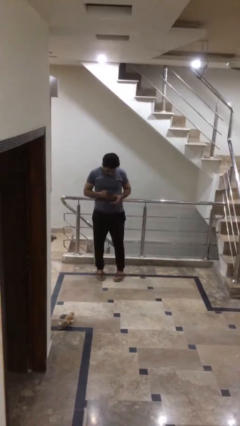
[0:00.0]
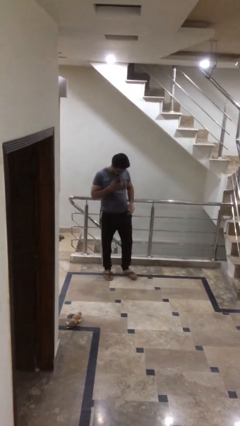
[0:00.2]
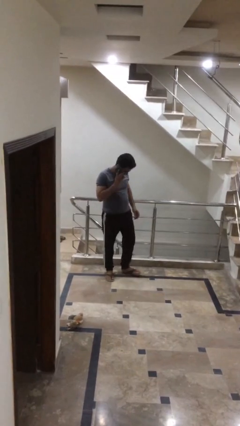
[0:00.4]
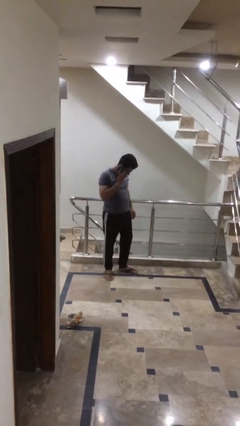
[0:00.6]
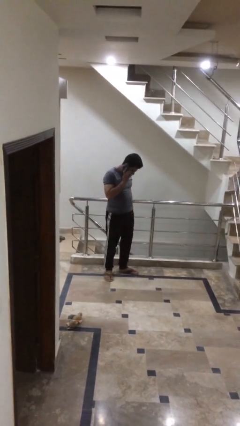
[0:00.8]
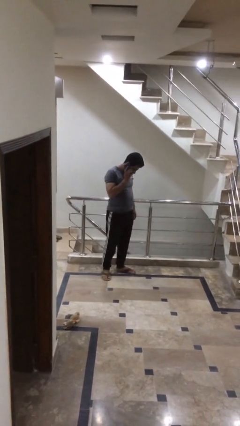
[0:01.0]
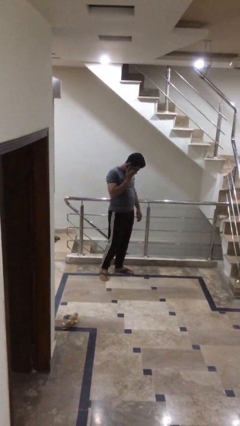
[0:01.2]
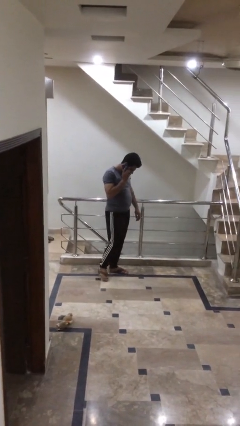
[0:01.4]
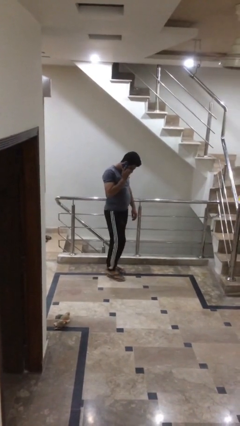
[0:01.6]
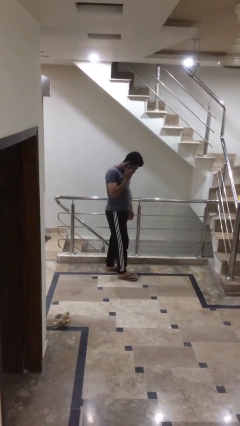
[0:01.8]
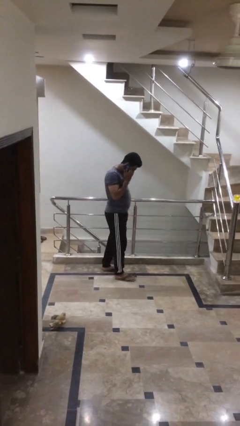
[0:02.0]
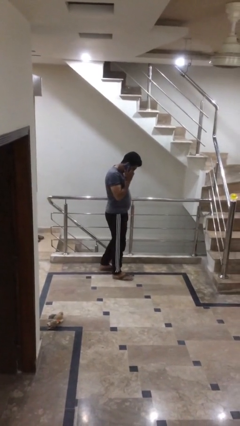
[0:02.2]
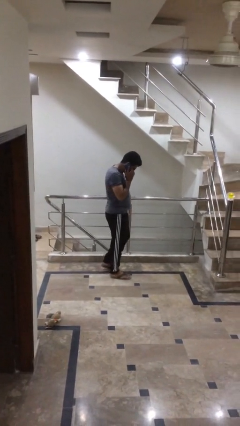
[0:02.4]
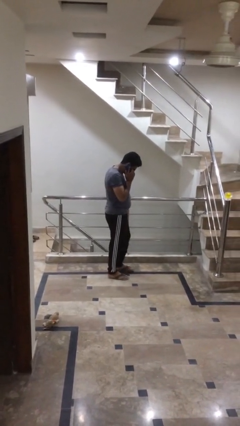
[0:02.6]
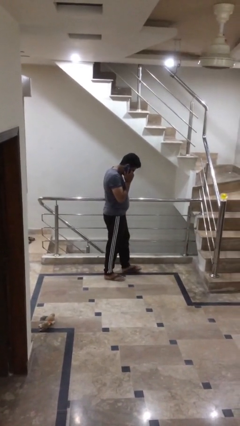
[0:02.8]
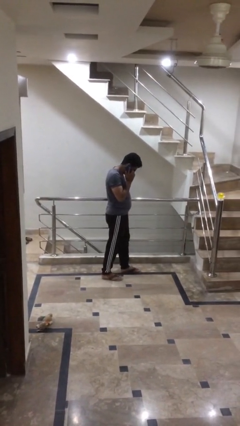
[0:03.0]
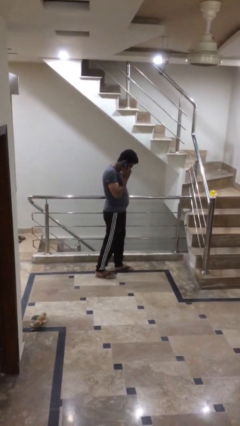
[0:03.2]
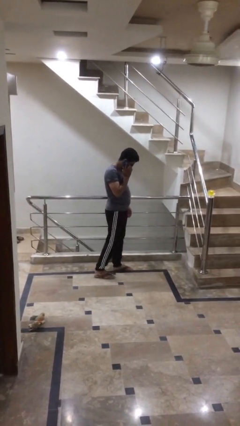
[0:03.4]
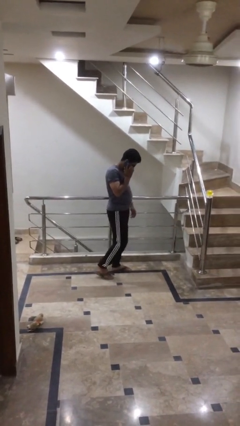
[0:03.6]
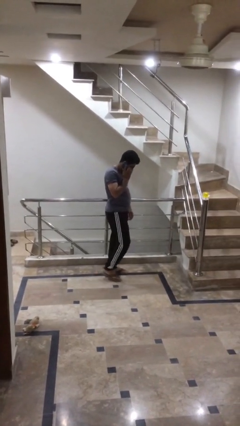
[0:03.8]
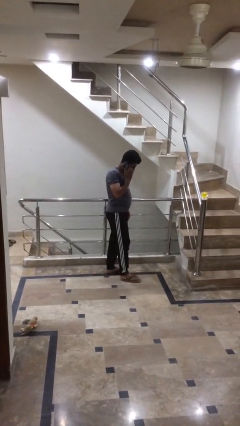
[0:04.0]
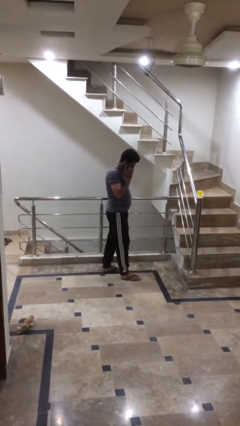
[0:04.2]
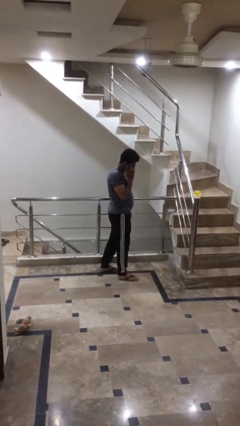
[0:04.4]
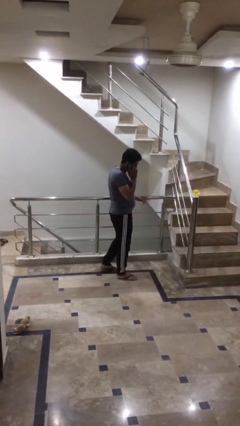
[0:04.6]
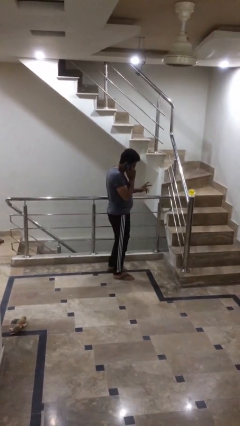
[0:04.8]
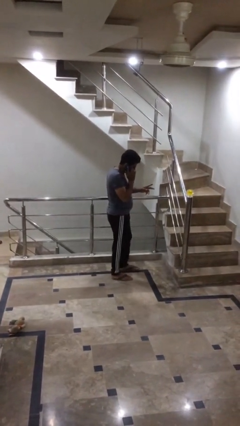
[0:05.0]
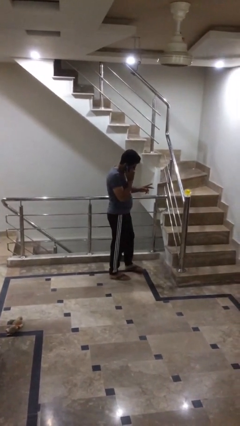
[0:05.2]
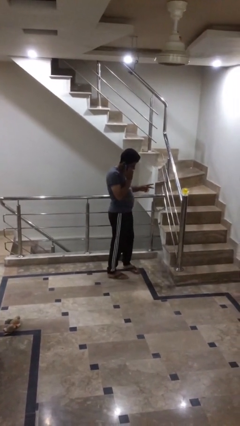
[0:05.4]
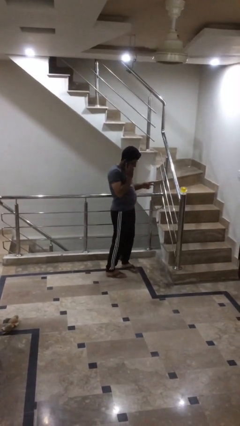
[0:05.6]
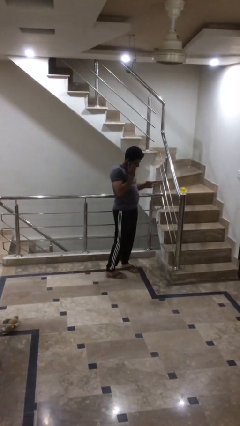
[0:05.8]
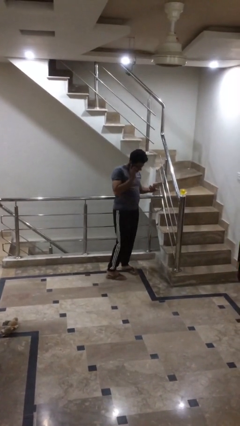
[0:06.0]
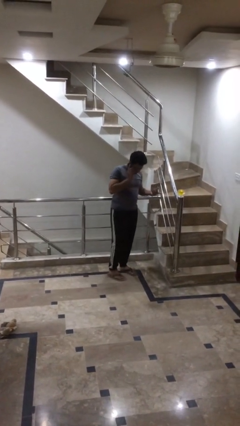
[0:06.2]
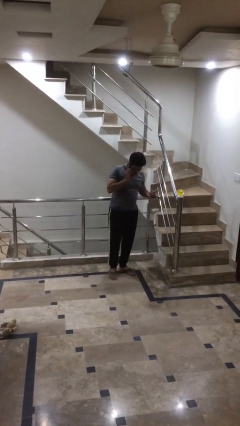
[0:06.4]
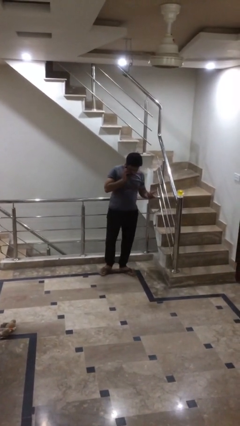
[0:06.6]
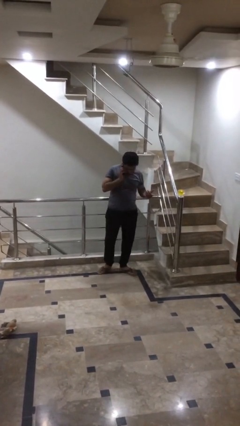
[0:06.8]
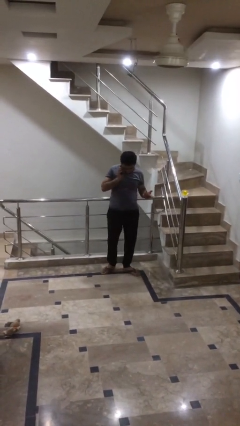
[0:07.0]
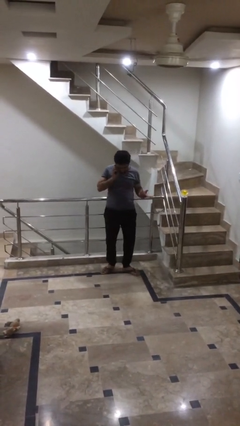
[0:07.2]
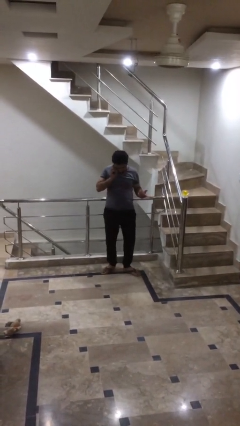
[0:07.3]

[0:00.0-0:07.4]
person talks on phone

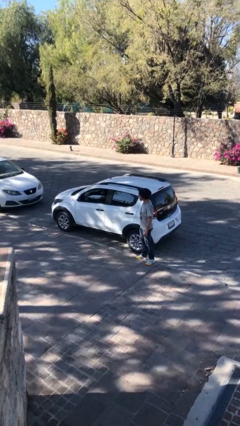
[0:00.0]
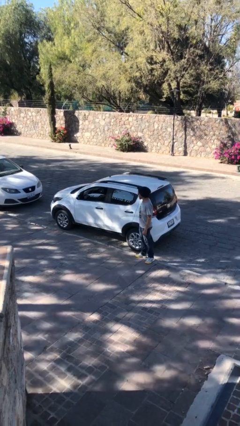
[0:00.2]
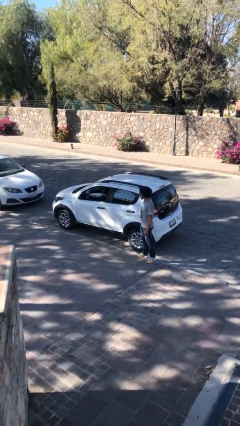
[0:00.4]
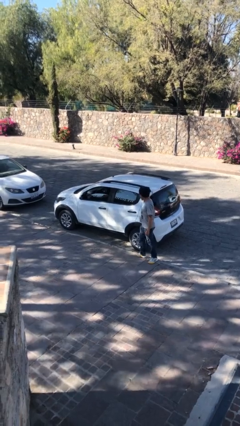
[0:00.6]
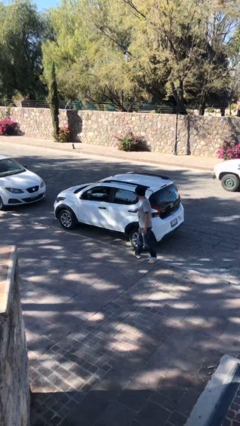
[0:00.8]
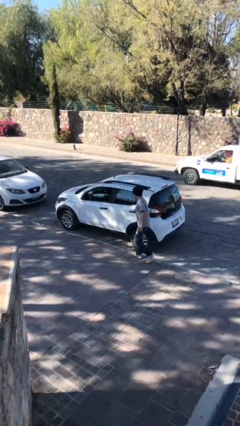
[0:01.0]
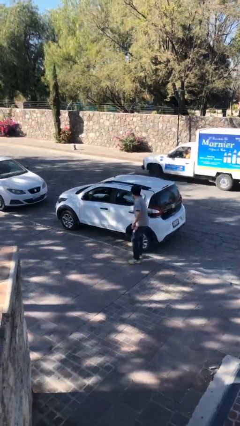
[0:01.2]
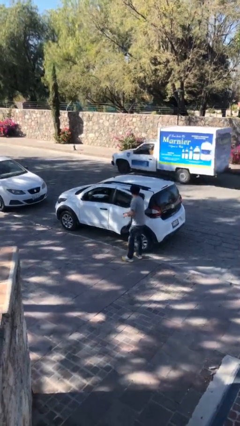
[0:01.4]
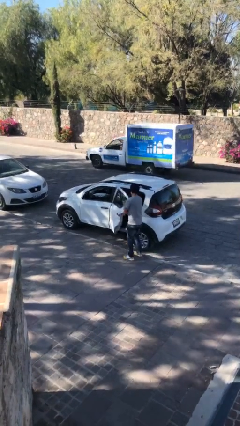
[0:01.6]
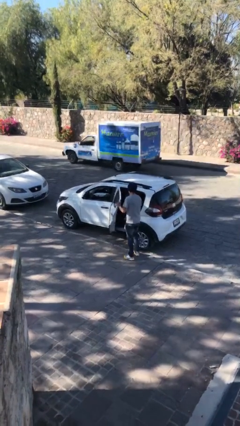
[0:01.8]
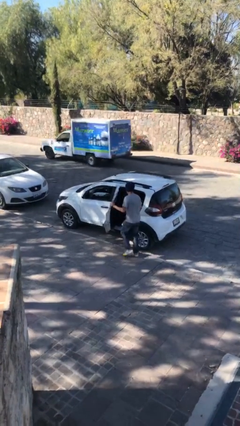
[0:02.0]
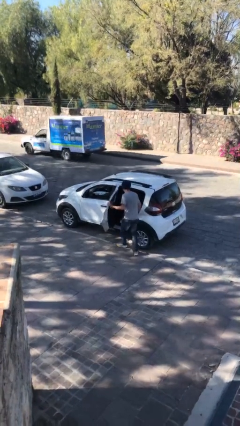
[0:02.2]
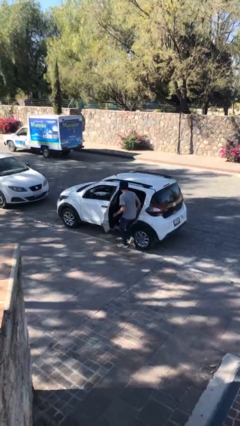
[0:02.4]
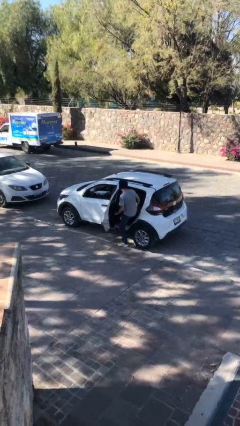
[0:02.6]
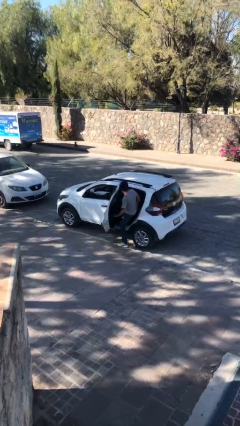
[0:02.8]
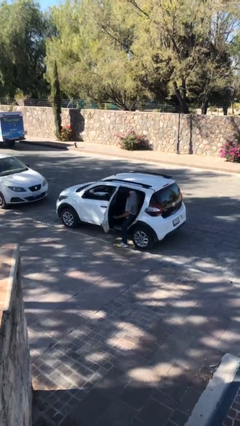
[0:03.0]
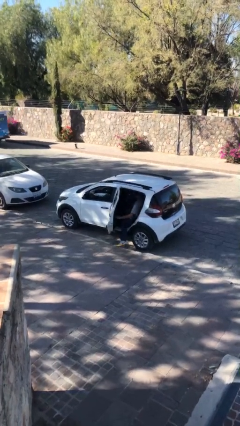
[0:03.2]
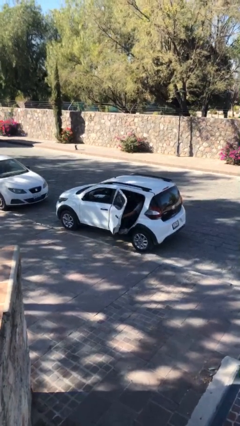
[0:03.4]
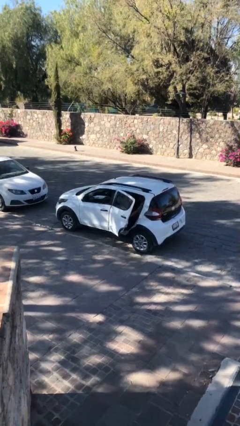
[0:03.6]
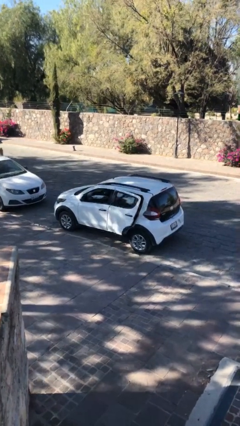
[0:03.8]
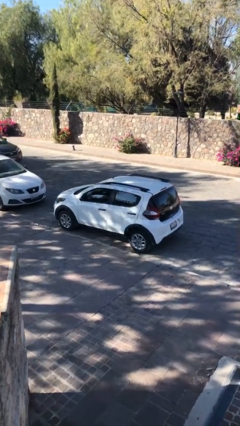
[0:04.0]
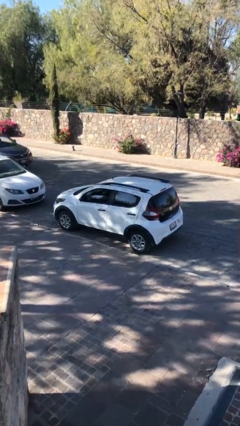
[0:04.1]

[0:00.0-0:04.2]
car picks up person

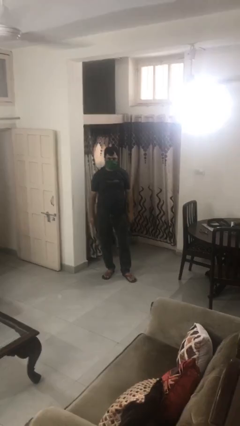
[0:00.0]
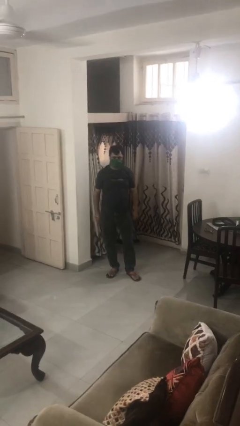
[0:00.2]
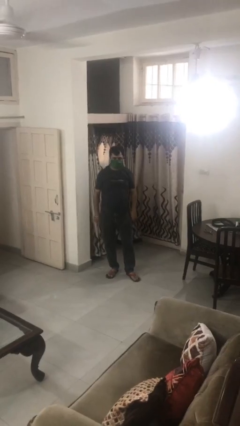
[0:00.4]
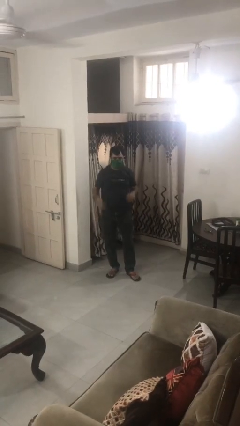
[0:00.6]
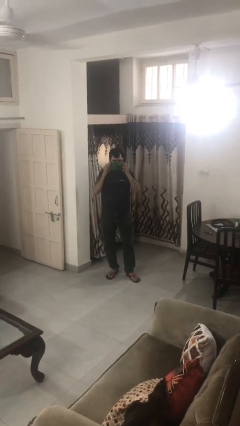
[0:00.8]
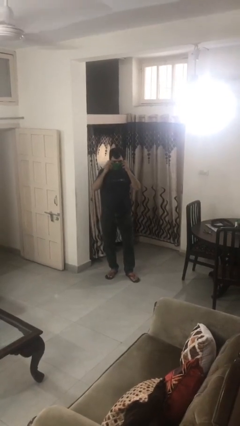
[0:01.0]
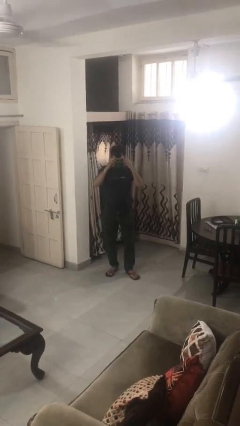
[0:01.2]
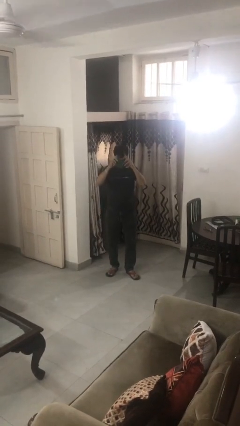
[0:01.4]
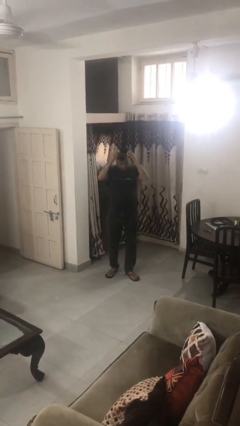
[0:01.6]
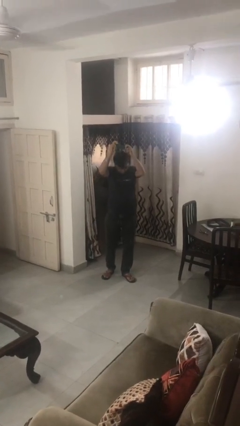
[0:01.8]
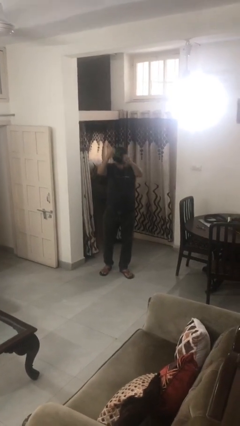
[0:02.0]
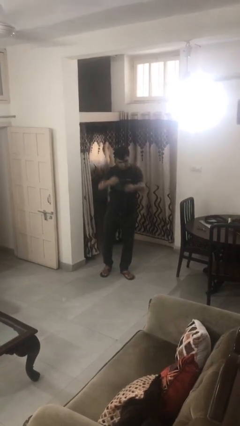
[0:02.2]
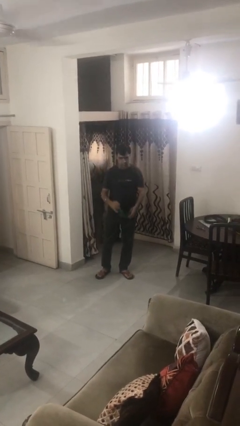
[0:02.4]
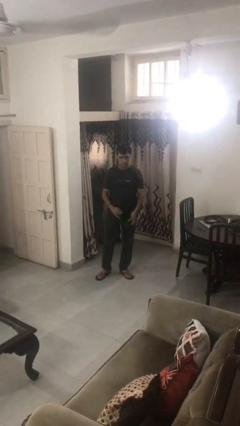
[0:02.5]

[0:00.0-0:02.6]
person takes off facemask

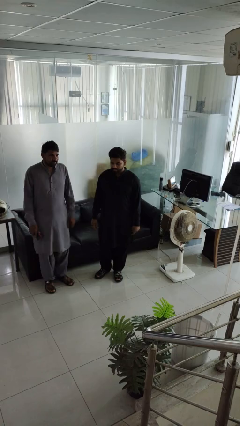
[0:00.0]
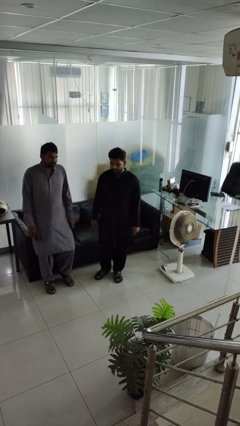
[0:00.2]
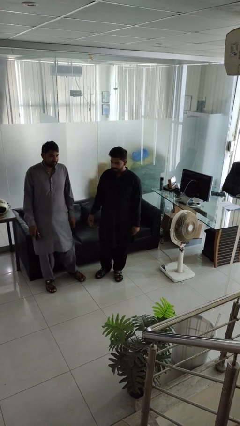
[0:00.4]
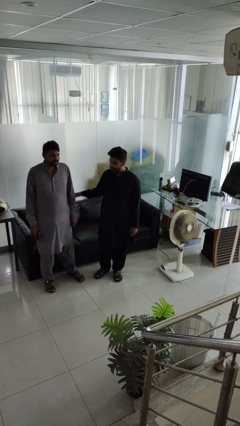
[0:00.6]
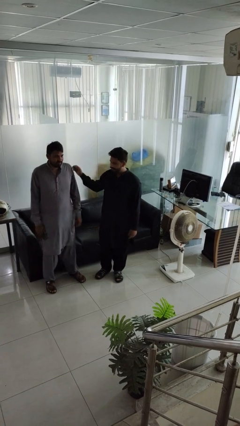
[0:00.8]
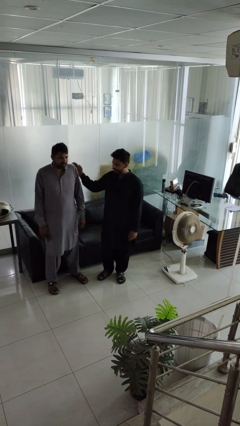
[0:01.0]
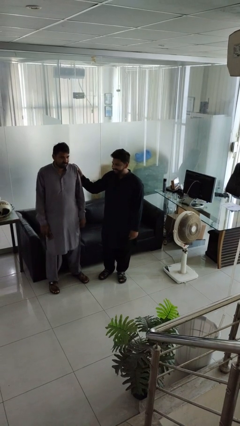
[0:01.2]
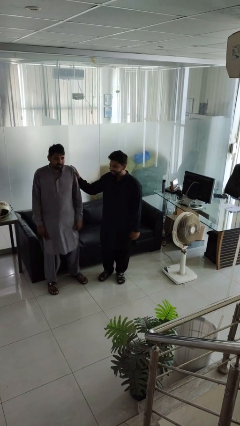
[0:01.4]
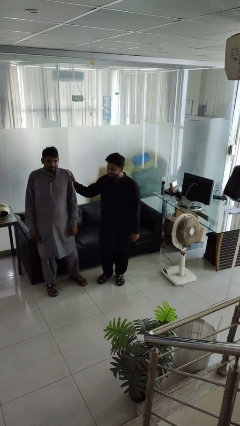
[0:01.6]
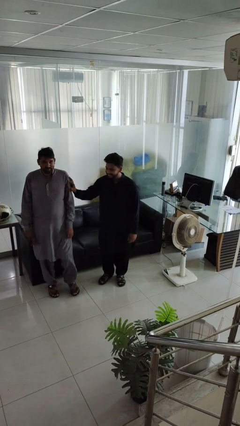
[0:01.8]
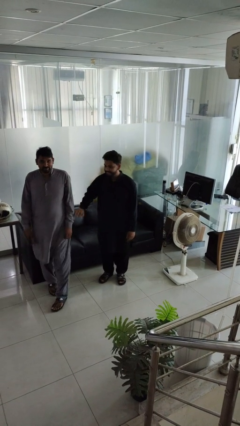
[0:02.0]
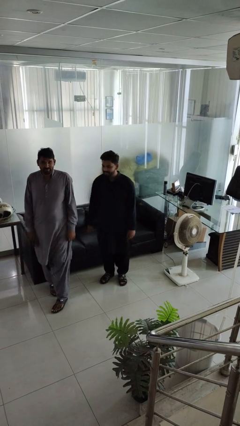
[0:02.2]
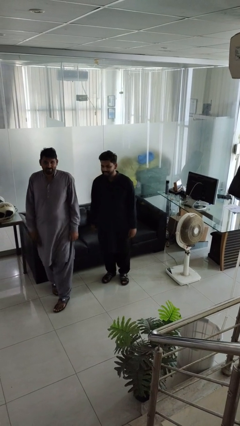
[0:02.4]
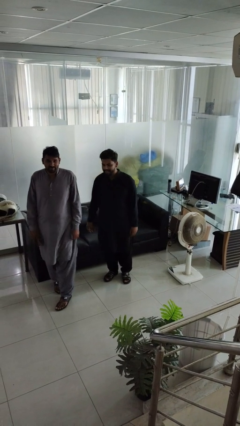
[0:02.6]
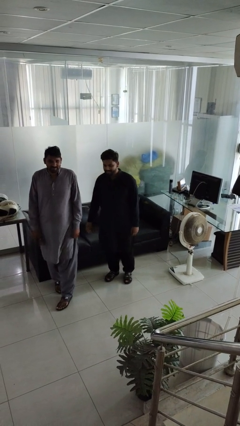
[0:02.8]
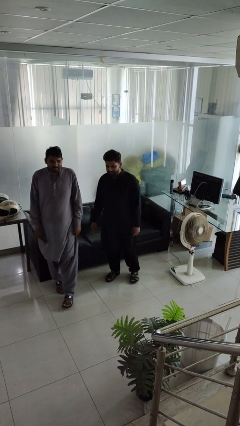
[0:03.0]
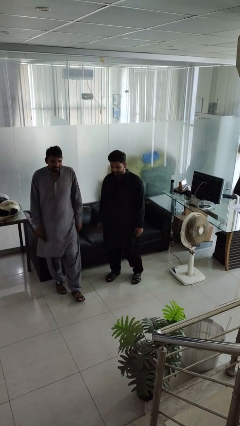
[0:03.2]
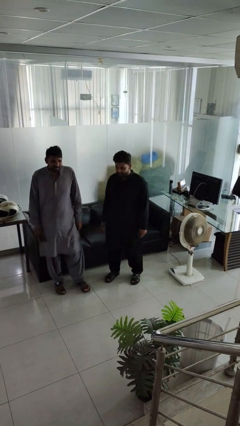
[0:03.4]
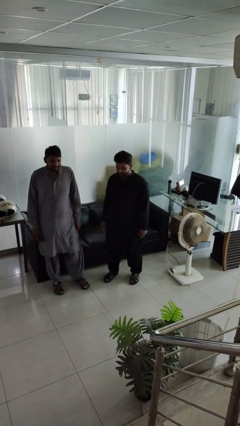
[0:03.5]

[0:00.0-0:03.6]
person shoves person
